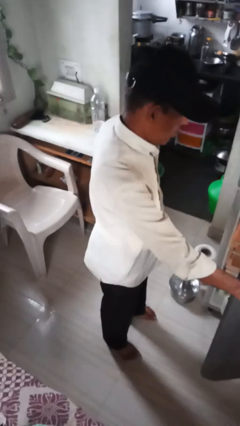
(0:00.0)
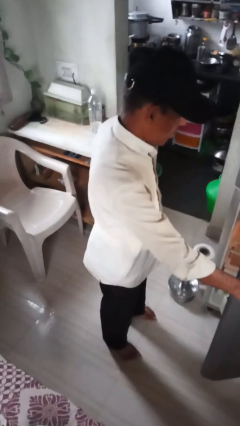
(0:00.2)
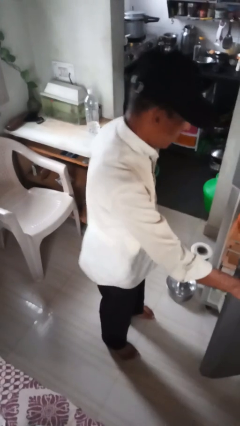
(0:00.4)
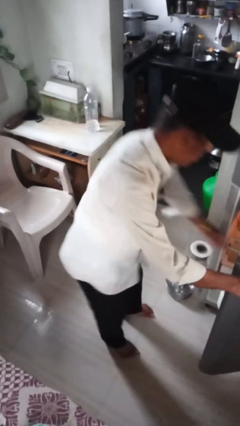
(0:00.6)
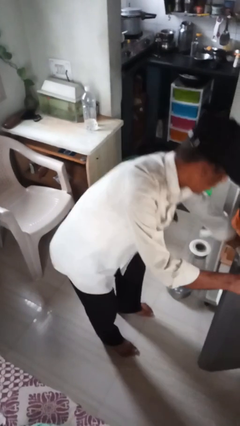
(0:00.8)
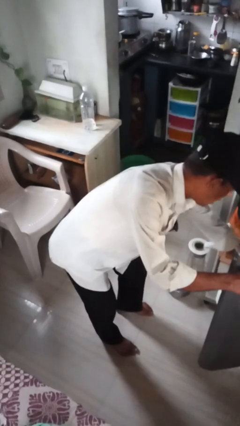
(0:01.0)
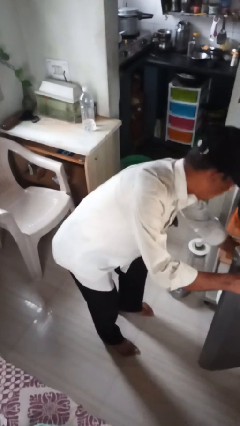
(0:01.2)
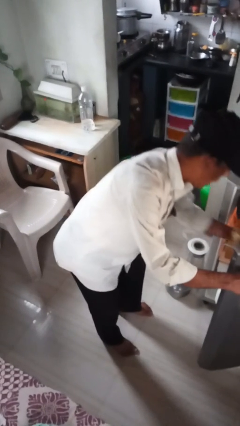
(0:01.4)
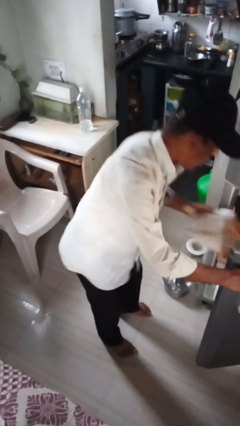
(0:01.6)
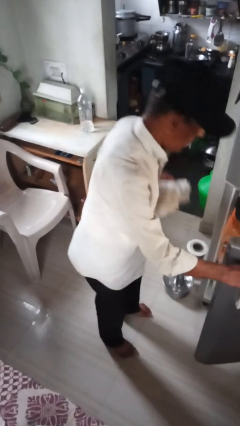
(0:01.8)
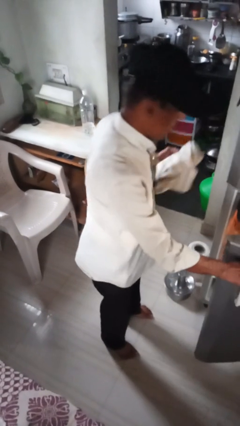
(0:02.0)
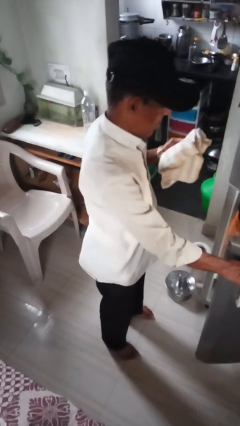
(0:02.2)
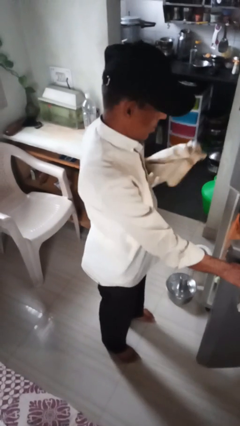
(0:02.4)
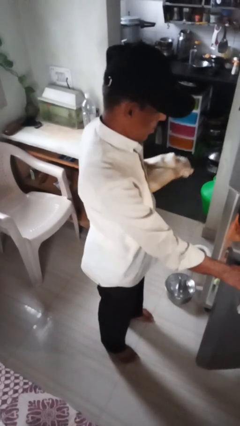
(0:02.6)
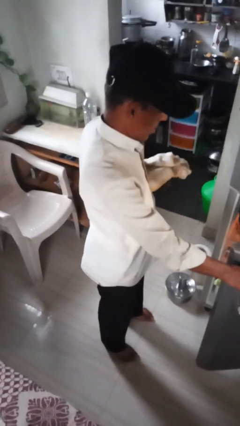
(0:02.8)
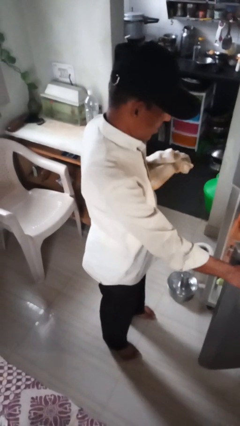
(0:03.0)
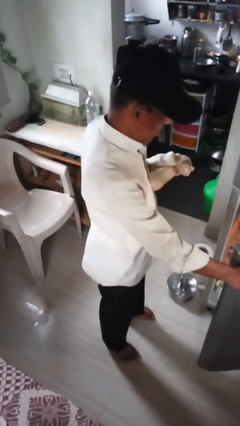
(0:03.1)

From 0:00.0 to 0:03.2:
person unloads clotheswasher

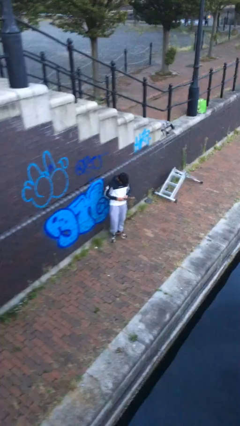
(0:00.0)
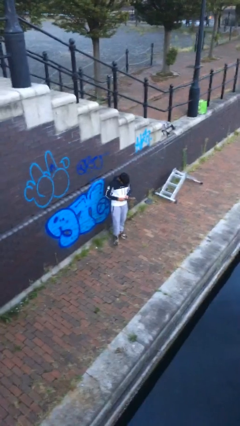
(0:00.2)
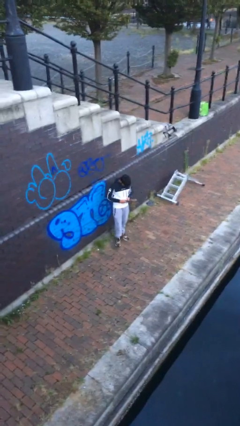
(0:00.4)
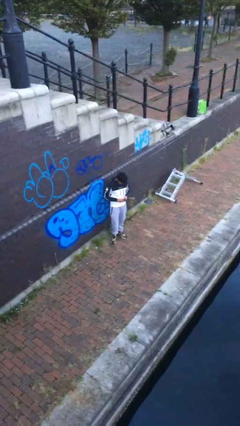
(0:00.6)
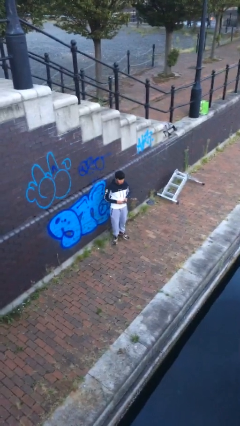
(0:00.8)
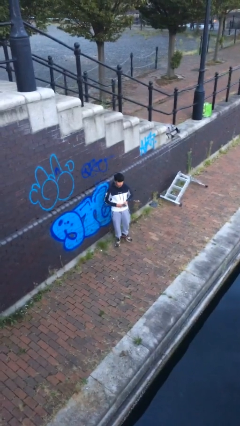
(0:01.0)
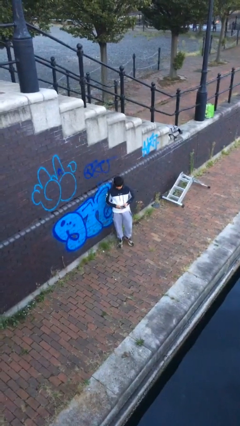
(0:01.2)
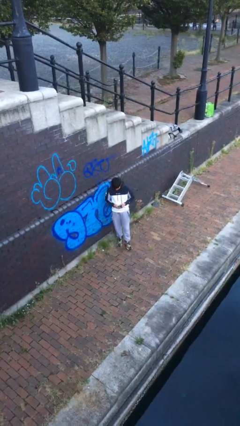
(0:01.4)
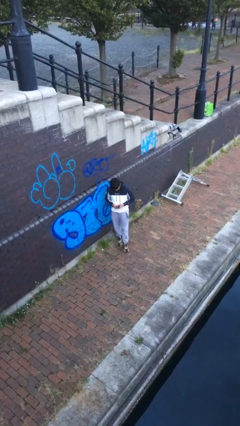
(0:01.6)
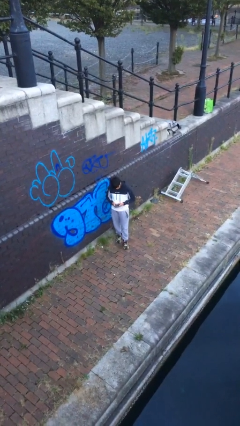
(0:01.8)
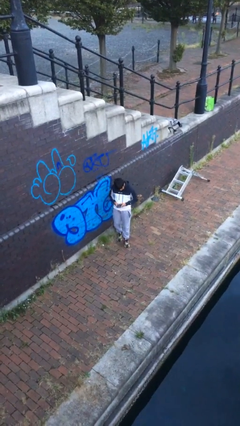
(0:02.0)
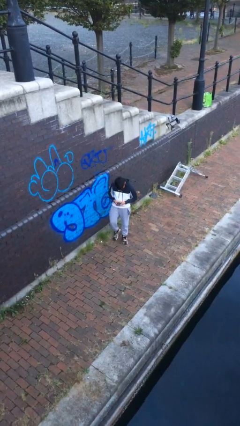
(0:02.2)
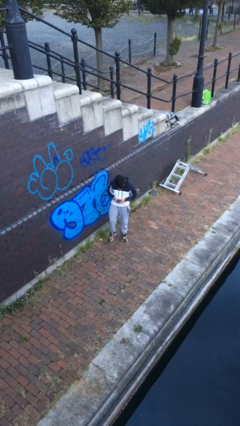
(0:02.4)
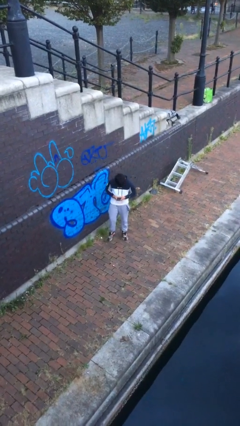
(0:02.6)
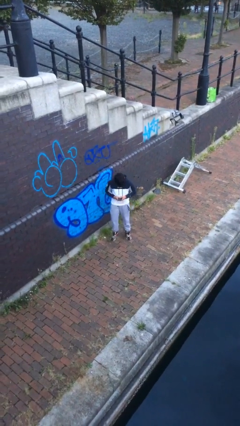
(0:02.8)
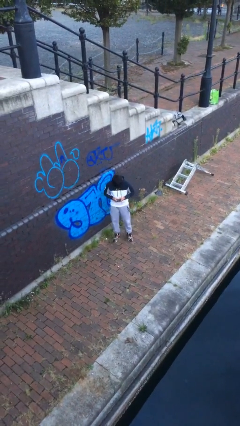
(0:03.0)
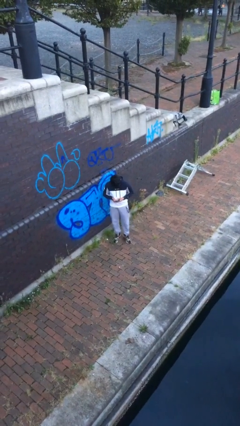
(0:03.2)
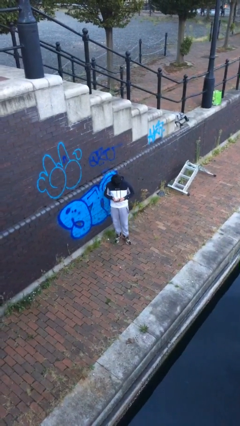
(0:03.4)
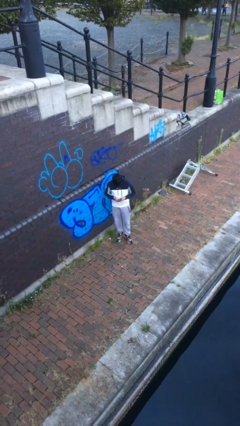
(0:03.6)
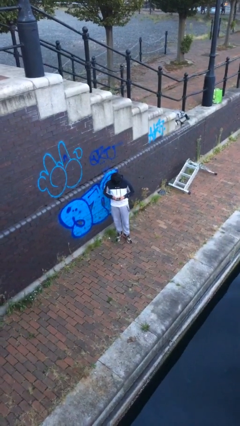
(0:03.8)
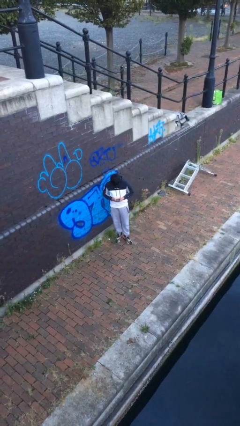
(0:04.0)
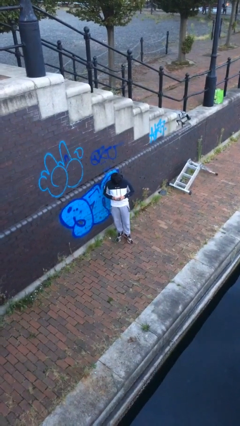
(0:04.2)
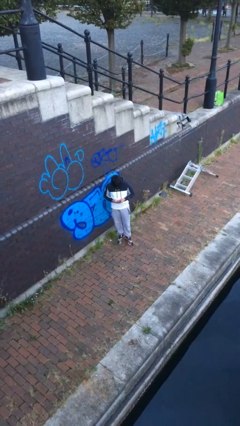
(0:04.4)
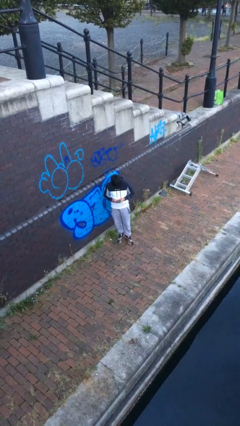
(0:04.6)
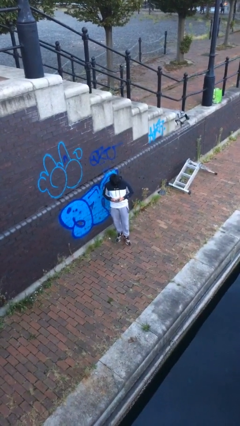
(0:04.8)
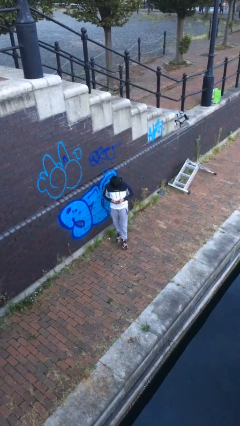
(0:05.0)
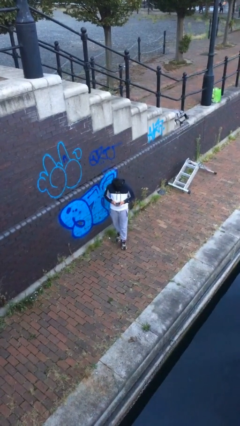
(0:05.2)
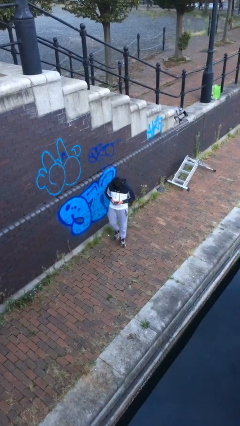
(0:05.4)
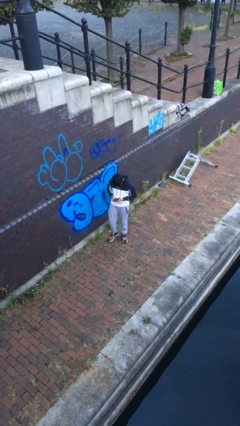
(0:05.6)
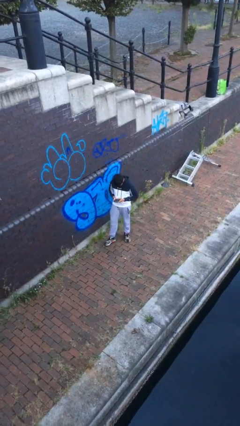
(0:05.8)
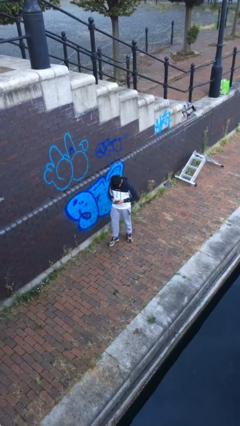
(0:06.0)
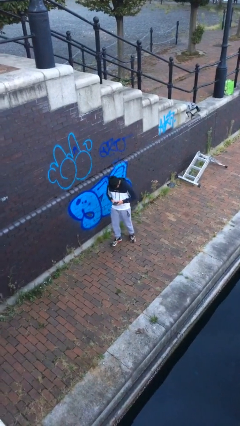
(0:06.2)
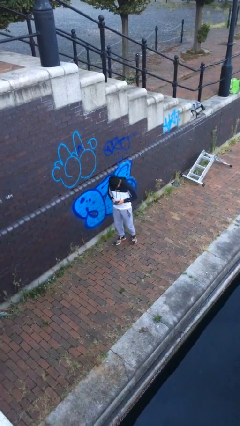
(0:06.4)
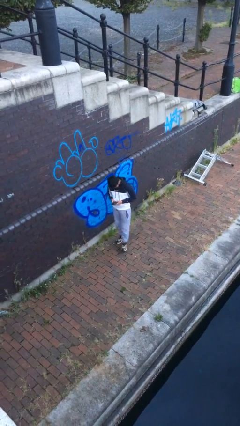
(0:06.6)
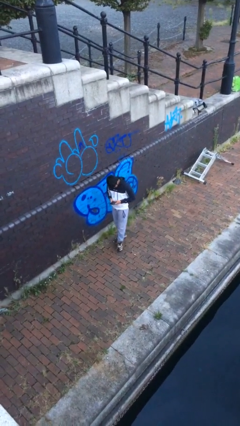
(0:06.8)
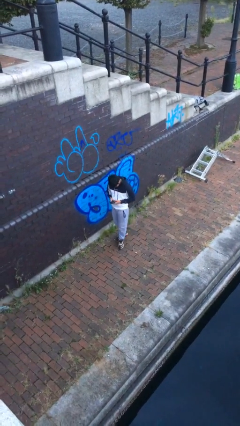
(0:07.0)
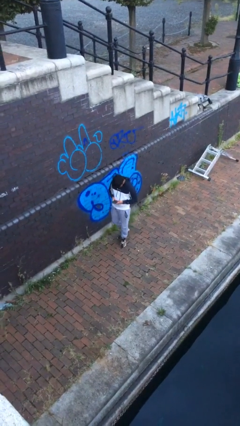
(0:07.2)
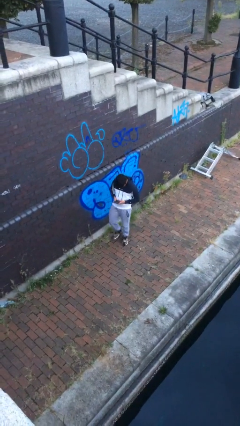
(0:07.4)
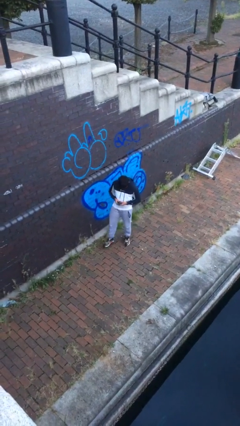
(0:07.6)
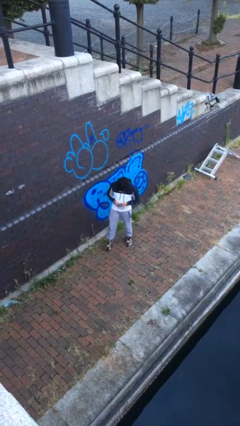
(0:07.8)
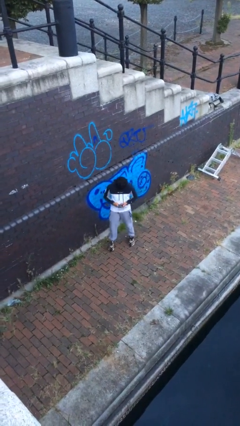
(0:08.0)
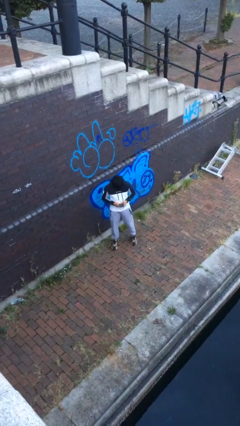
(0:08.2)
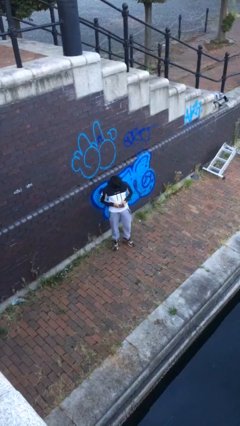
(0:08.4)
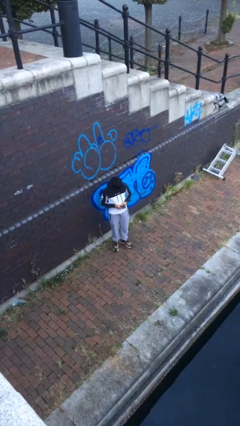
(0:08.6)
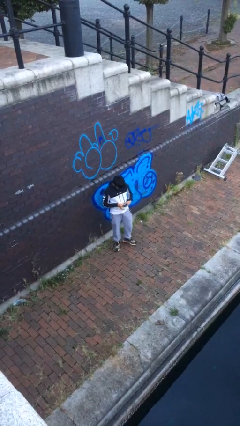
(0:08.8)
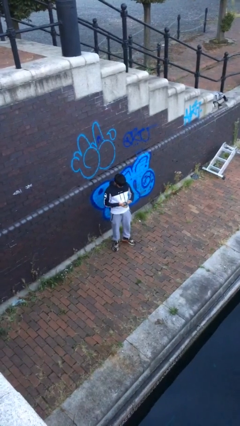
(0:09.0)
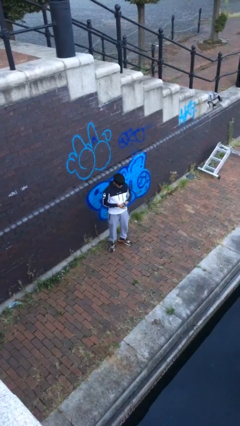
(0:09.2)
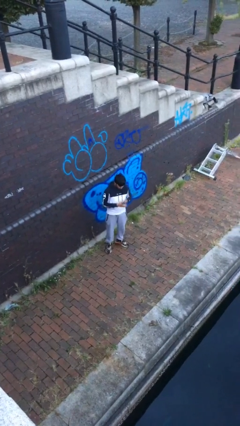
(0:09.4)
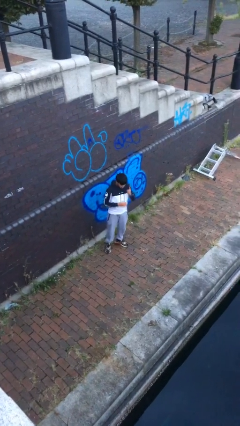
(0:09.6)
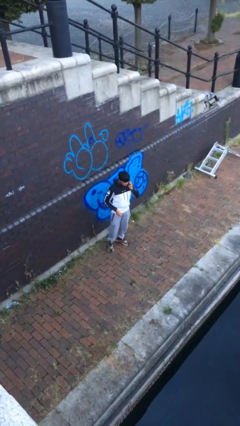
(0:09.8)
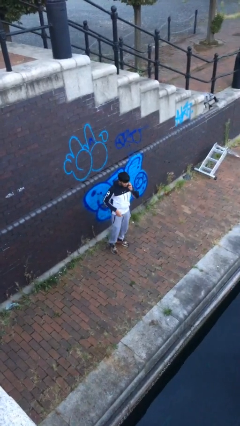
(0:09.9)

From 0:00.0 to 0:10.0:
person texts on phone

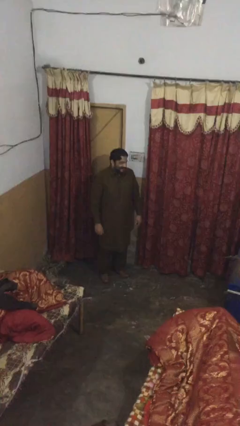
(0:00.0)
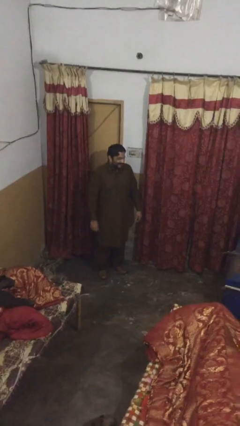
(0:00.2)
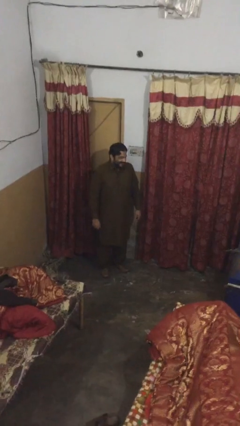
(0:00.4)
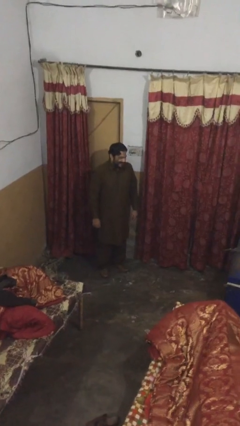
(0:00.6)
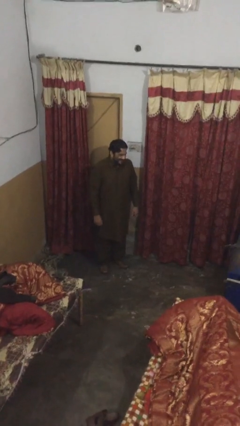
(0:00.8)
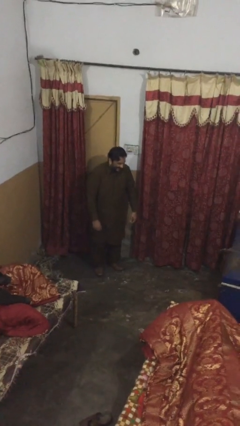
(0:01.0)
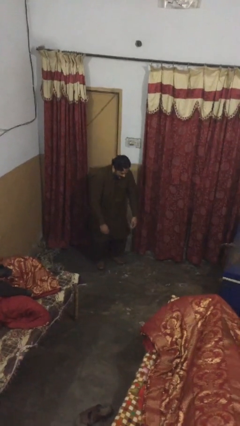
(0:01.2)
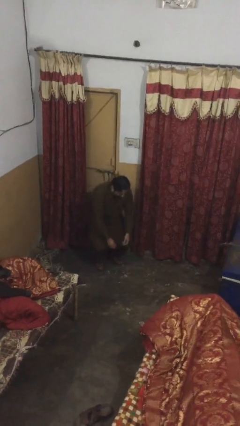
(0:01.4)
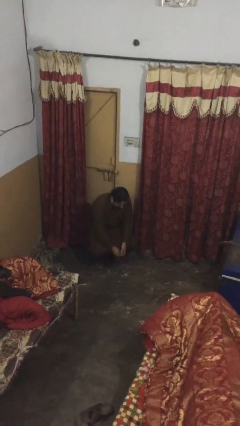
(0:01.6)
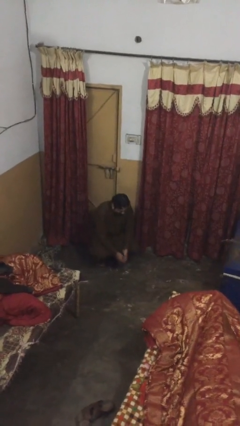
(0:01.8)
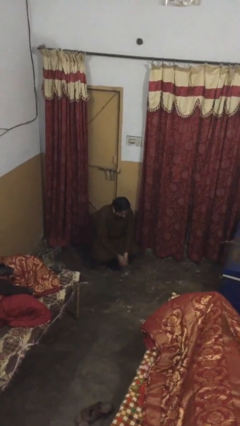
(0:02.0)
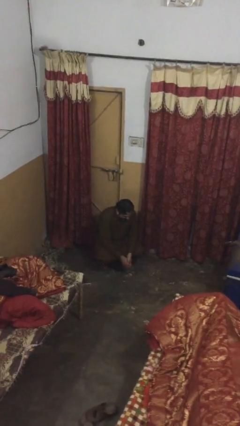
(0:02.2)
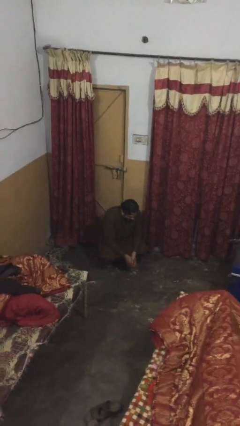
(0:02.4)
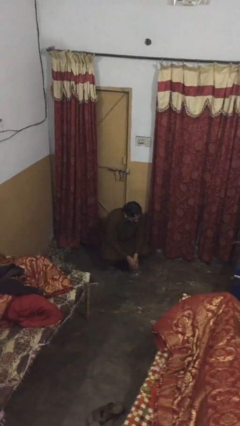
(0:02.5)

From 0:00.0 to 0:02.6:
person sits down

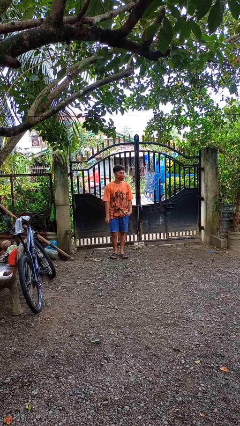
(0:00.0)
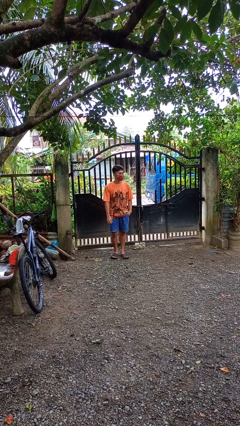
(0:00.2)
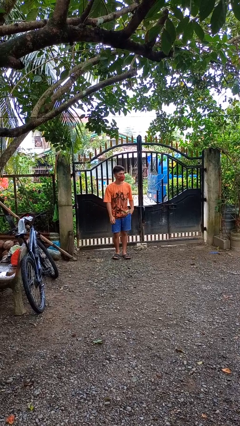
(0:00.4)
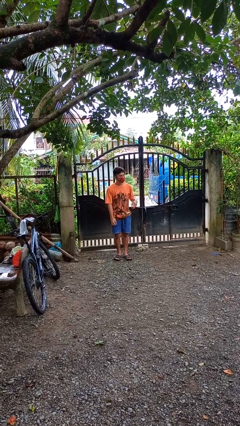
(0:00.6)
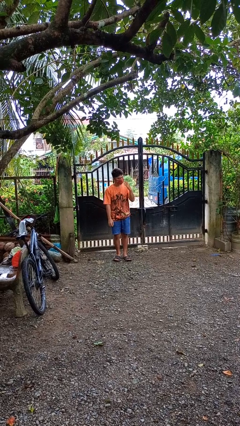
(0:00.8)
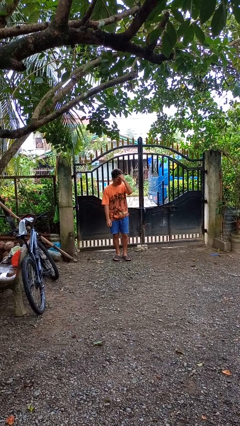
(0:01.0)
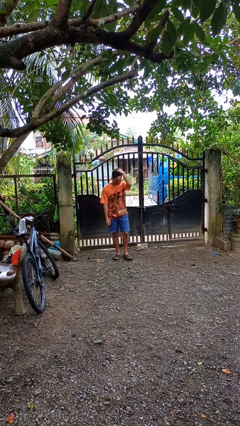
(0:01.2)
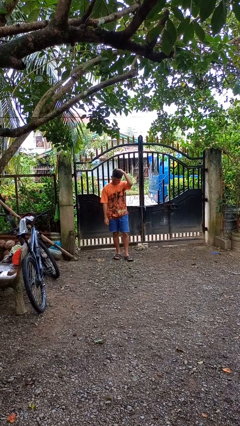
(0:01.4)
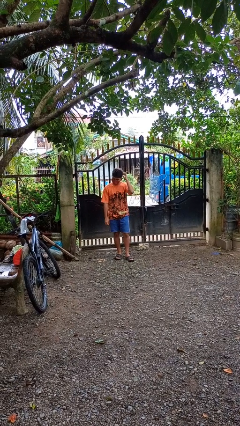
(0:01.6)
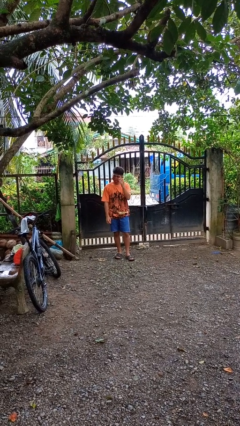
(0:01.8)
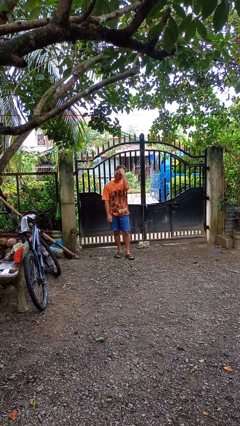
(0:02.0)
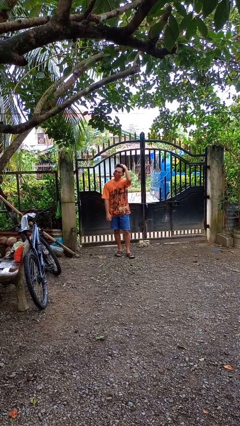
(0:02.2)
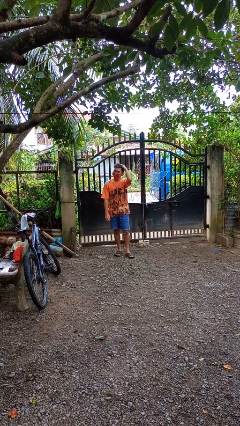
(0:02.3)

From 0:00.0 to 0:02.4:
person strokes hair
